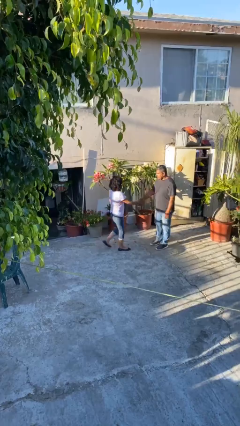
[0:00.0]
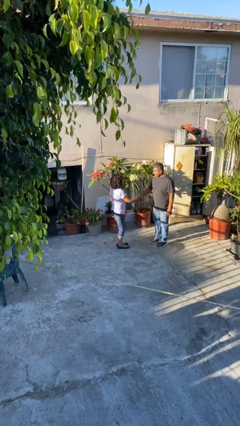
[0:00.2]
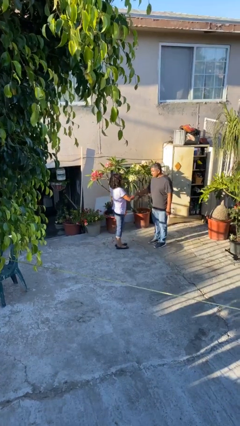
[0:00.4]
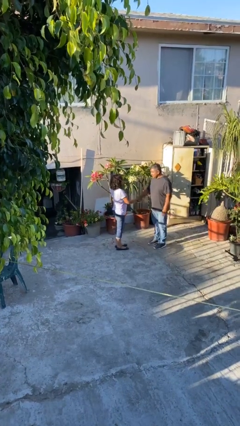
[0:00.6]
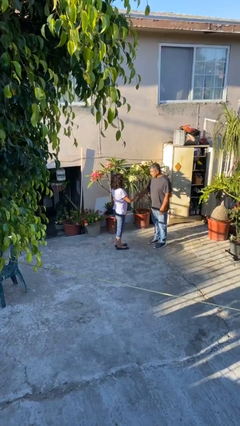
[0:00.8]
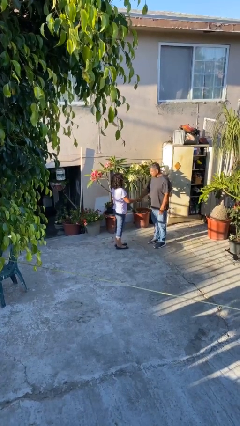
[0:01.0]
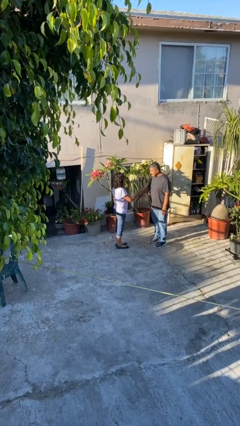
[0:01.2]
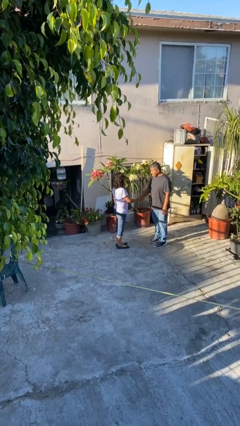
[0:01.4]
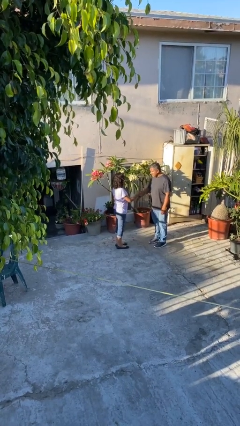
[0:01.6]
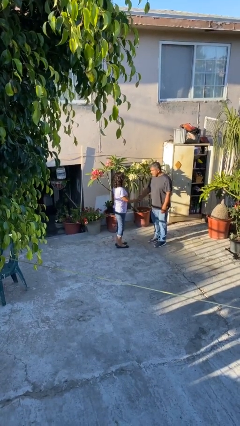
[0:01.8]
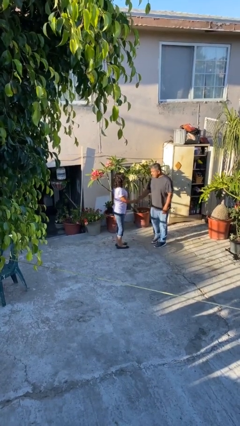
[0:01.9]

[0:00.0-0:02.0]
person shakes hand

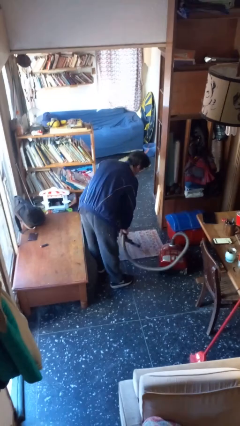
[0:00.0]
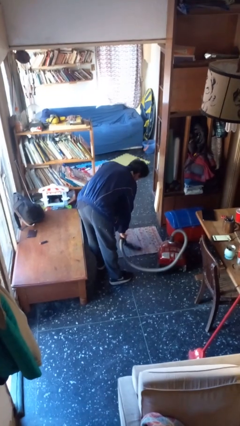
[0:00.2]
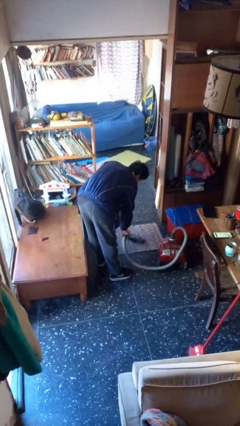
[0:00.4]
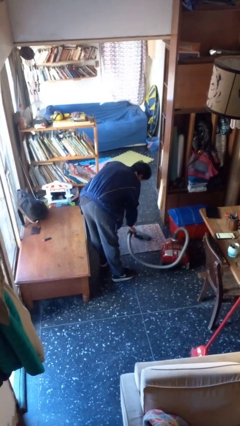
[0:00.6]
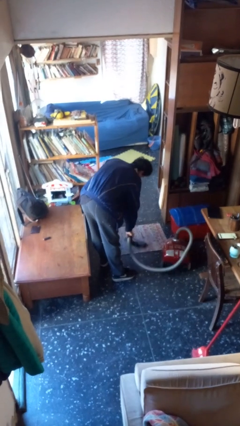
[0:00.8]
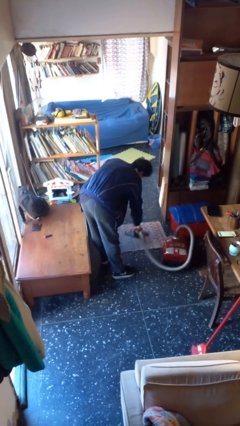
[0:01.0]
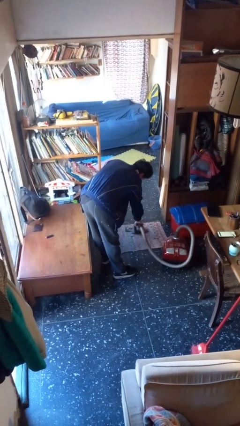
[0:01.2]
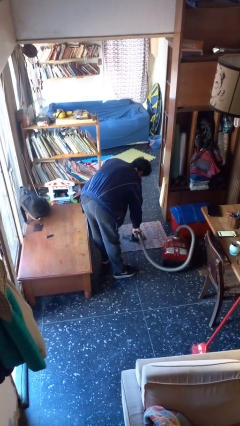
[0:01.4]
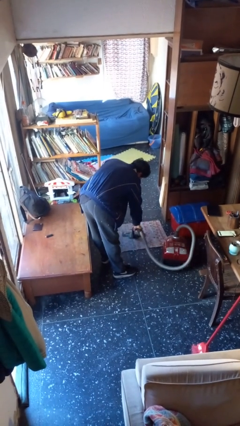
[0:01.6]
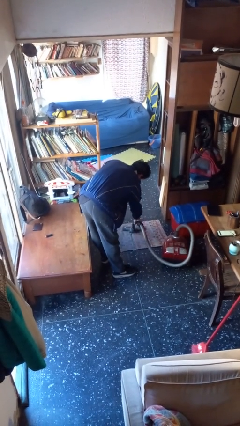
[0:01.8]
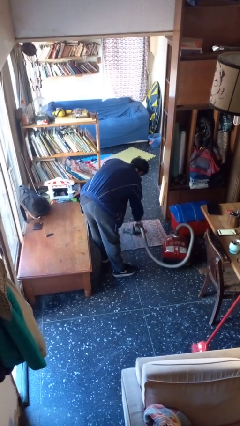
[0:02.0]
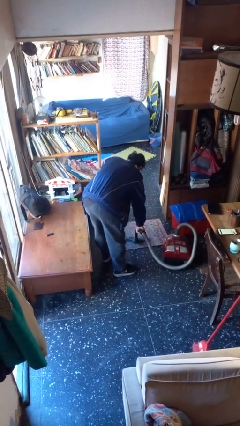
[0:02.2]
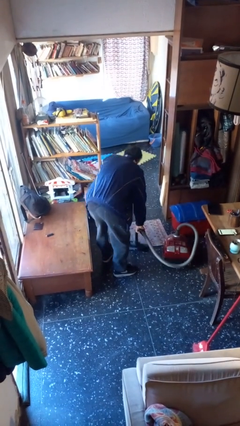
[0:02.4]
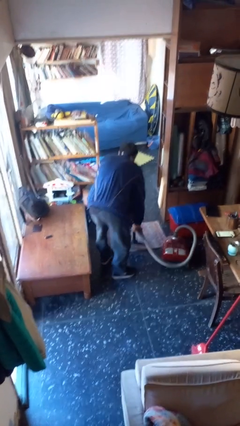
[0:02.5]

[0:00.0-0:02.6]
person vacuums carpet

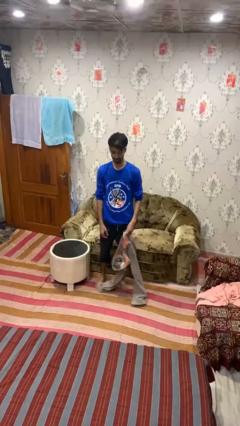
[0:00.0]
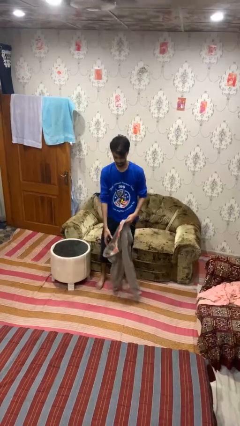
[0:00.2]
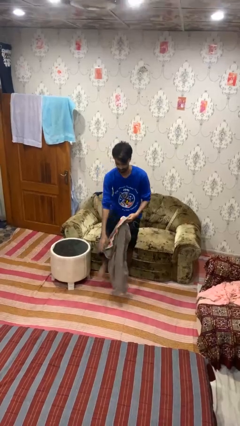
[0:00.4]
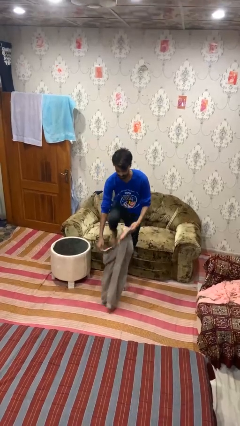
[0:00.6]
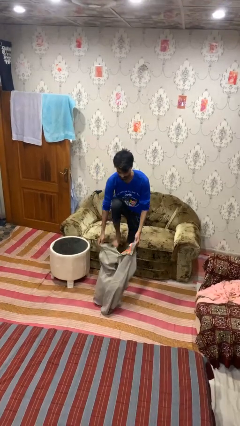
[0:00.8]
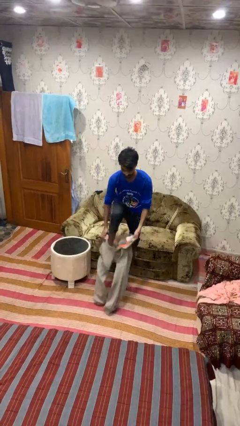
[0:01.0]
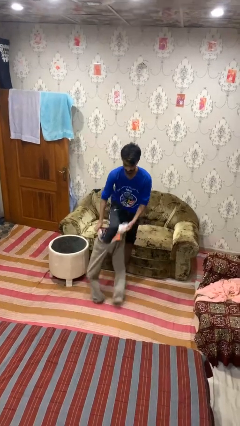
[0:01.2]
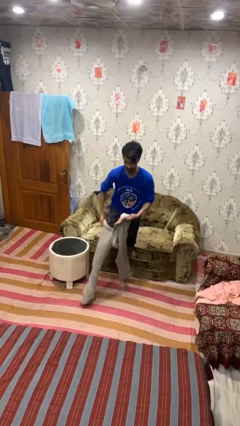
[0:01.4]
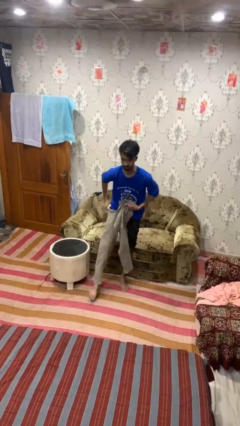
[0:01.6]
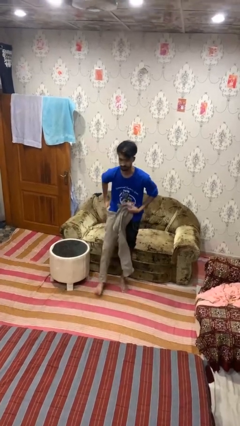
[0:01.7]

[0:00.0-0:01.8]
person puts on pants

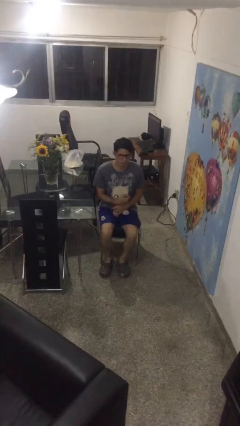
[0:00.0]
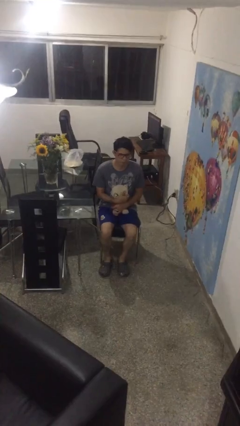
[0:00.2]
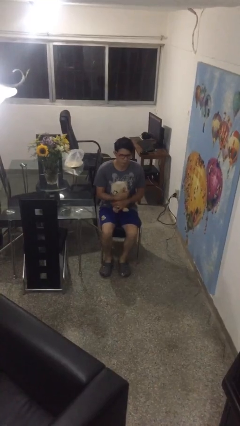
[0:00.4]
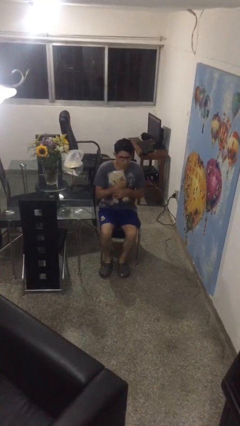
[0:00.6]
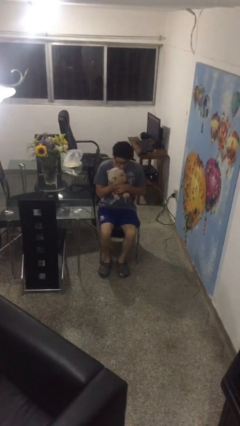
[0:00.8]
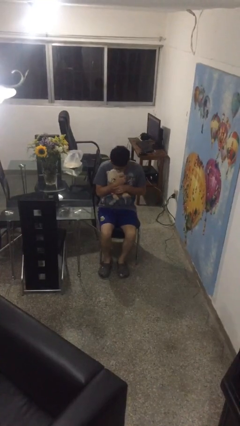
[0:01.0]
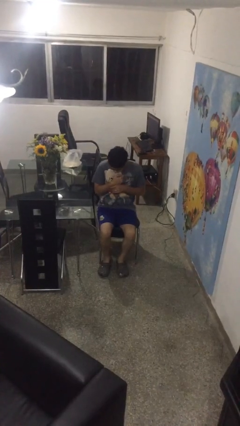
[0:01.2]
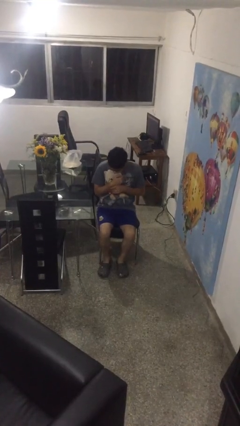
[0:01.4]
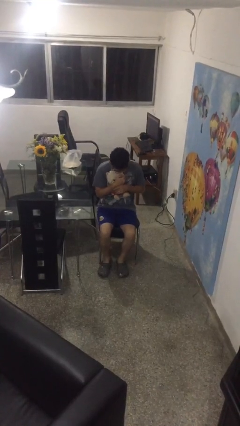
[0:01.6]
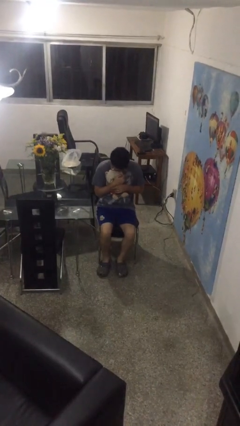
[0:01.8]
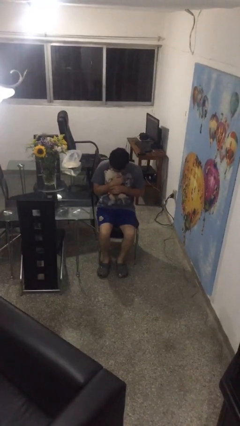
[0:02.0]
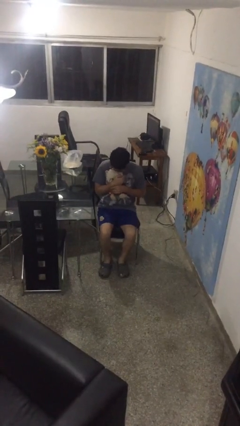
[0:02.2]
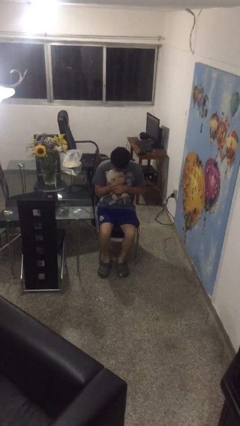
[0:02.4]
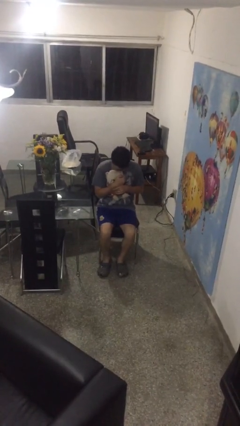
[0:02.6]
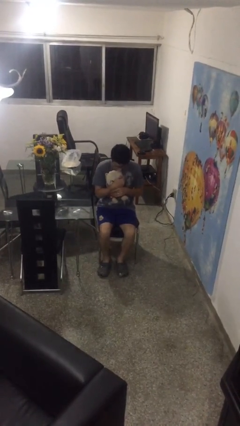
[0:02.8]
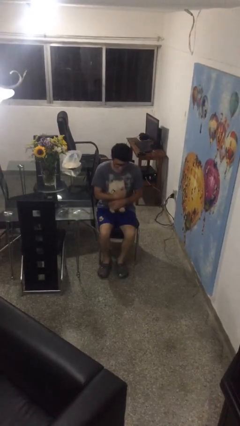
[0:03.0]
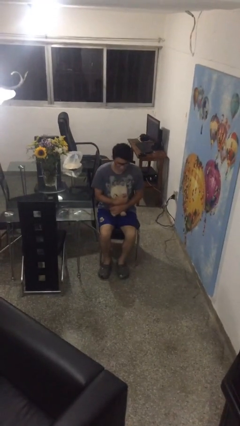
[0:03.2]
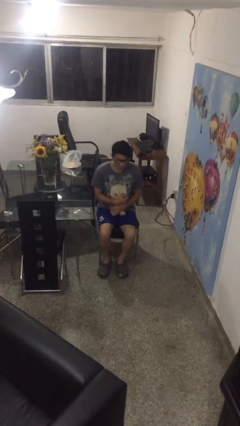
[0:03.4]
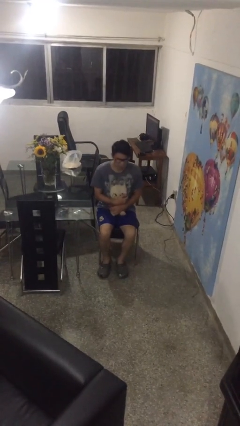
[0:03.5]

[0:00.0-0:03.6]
person hugs stuffed animal

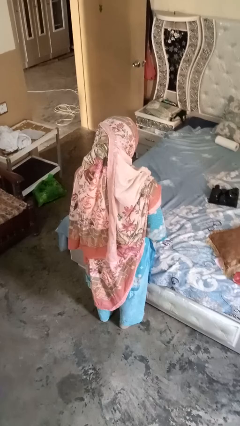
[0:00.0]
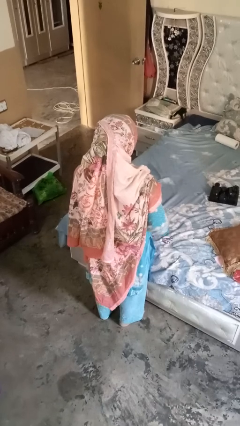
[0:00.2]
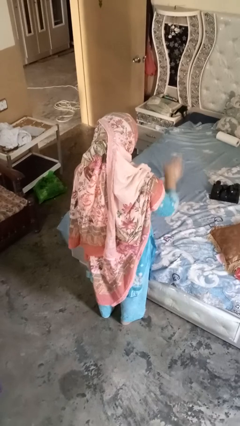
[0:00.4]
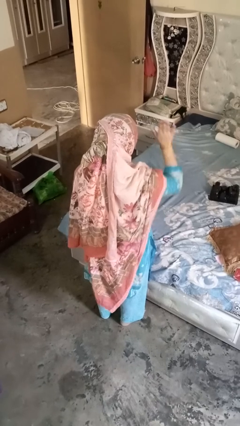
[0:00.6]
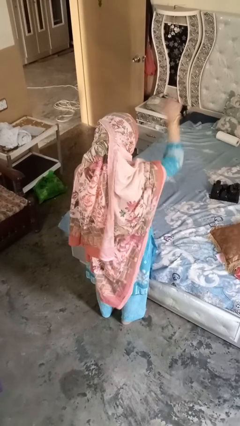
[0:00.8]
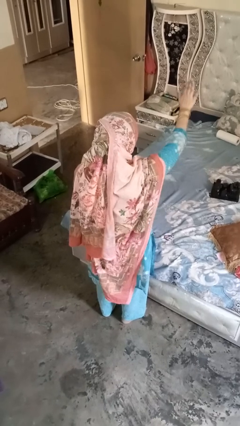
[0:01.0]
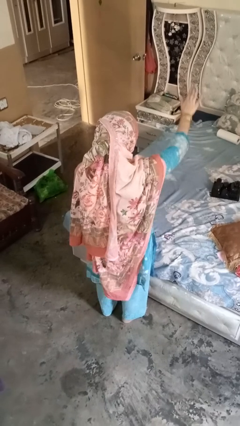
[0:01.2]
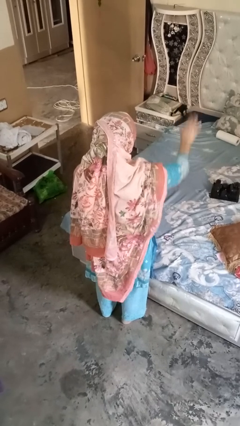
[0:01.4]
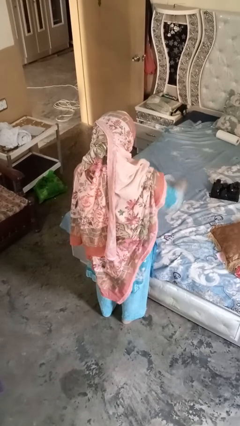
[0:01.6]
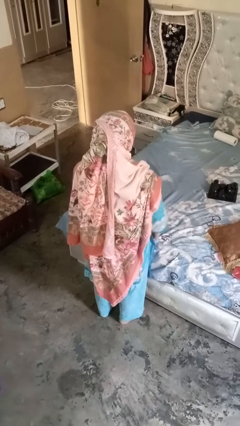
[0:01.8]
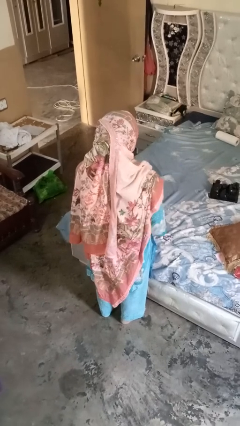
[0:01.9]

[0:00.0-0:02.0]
person gestures stop

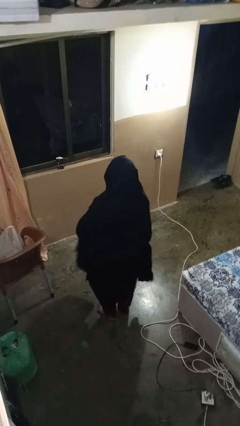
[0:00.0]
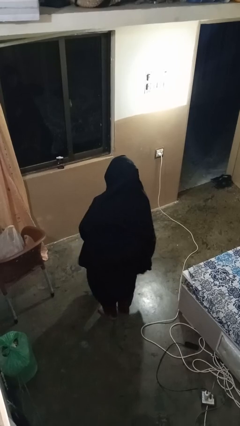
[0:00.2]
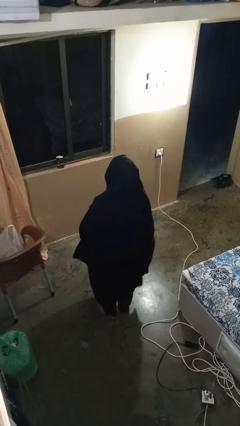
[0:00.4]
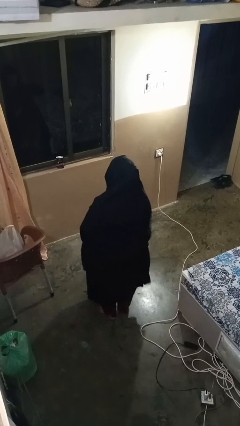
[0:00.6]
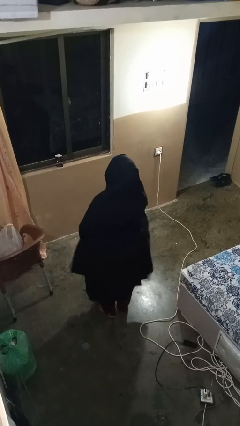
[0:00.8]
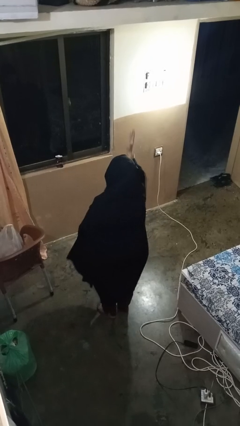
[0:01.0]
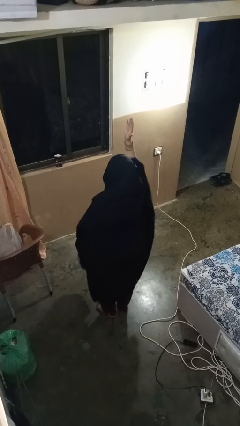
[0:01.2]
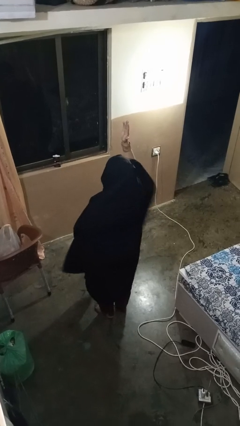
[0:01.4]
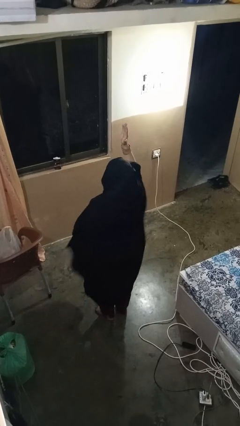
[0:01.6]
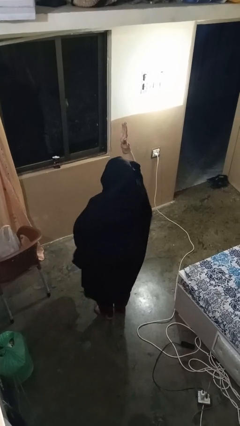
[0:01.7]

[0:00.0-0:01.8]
person gestures raise hand

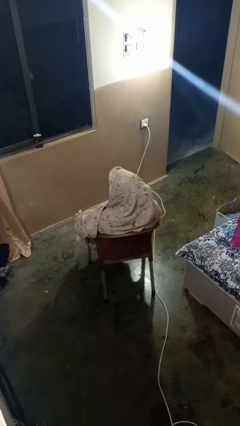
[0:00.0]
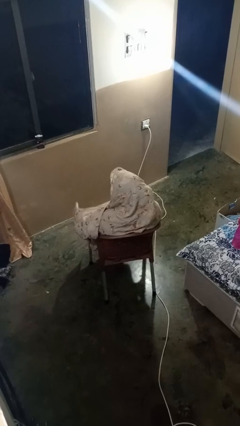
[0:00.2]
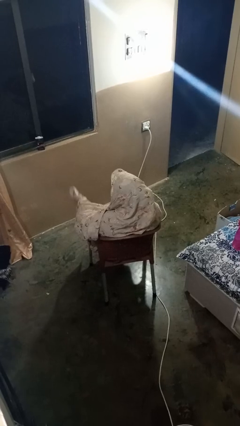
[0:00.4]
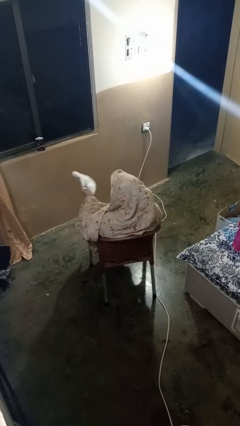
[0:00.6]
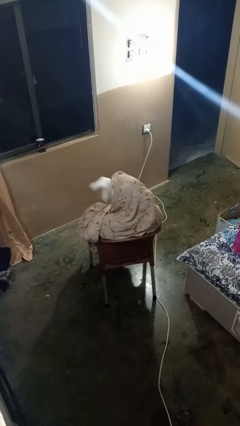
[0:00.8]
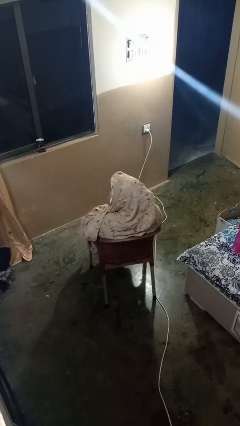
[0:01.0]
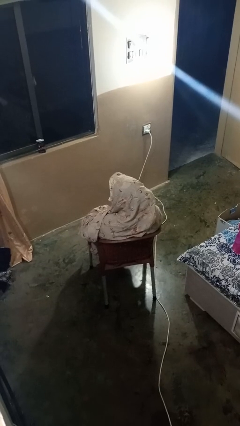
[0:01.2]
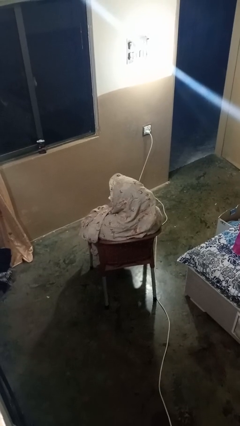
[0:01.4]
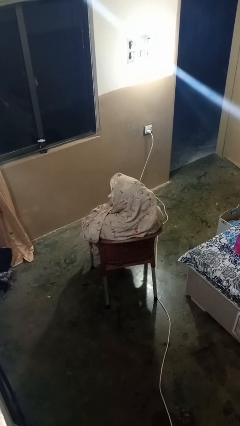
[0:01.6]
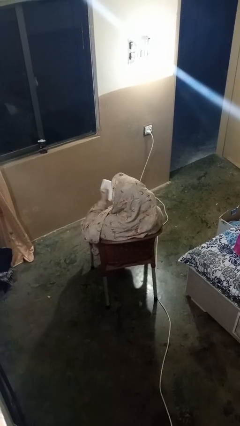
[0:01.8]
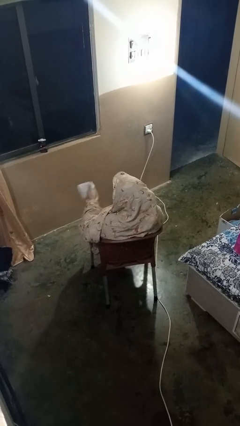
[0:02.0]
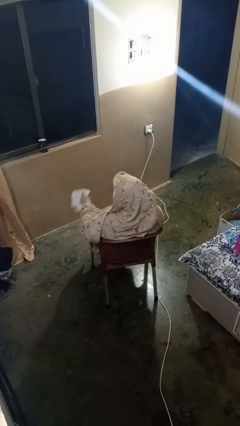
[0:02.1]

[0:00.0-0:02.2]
person wipes mouth with napkin

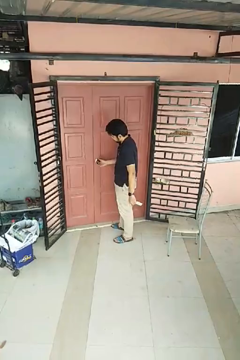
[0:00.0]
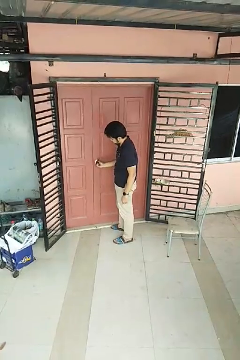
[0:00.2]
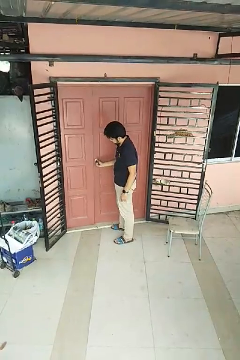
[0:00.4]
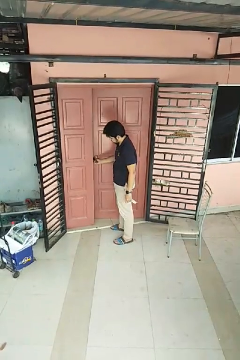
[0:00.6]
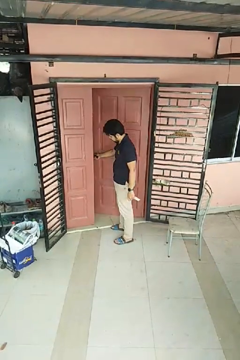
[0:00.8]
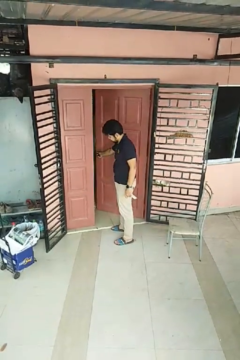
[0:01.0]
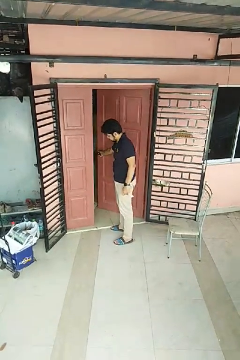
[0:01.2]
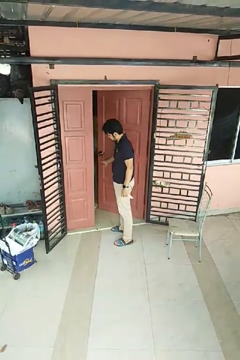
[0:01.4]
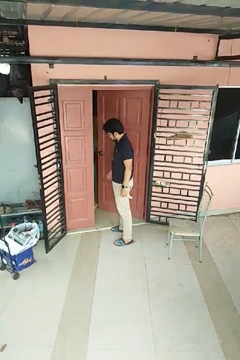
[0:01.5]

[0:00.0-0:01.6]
person opens facility door

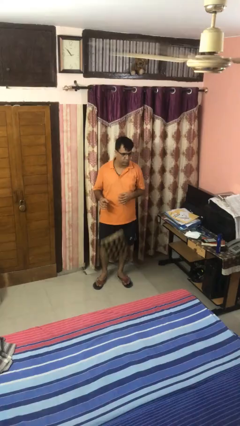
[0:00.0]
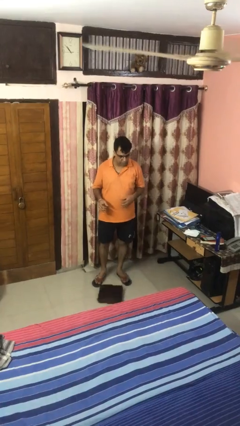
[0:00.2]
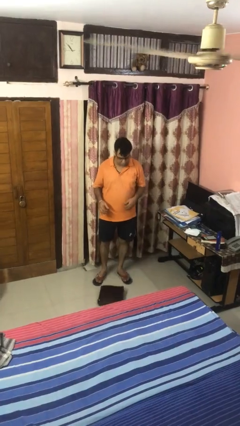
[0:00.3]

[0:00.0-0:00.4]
person drops object
